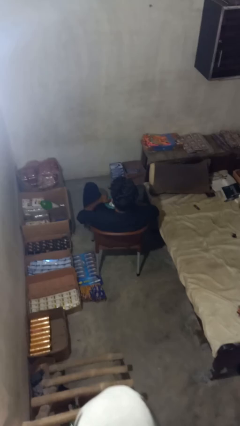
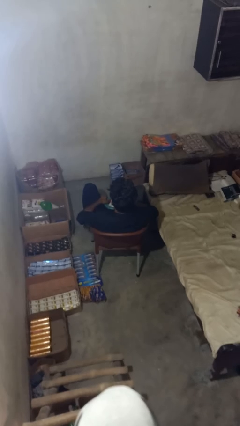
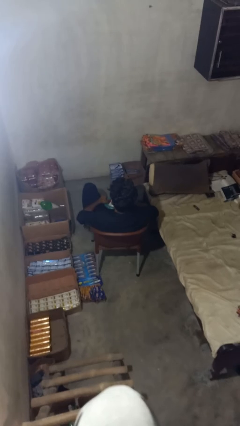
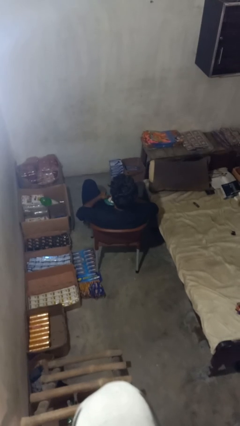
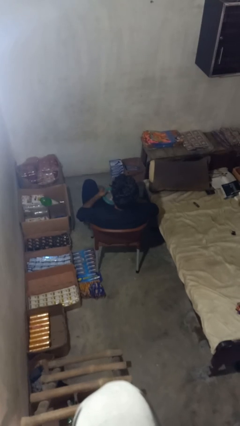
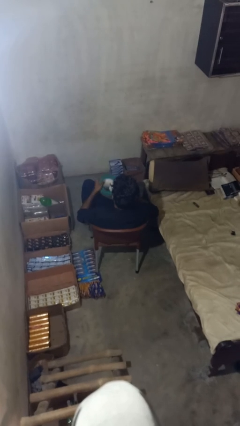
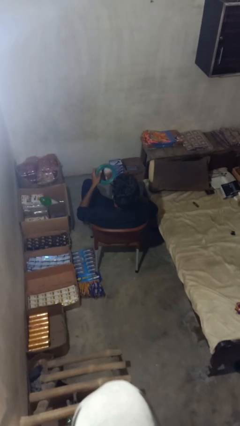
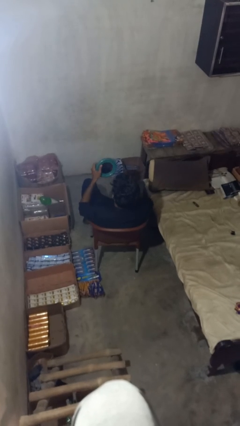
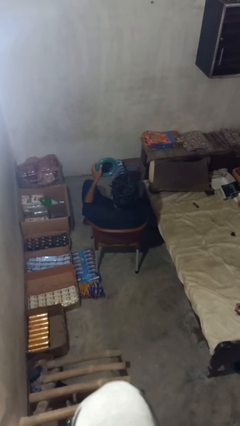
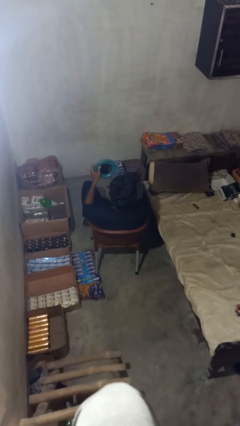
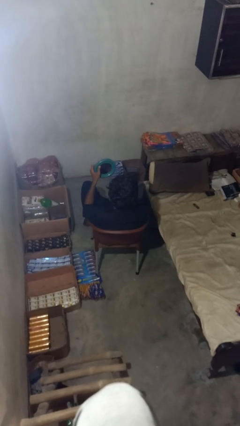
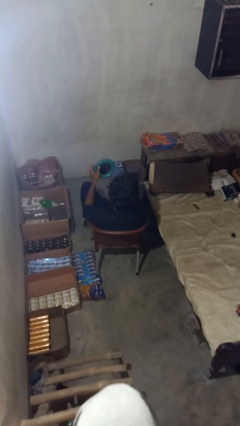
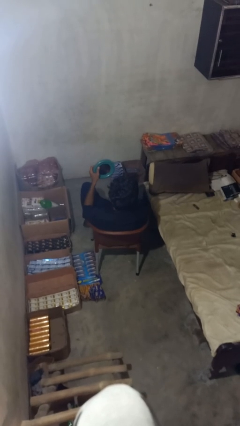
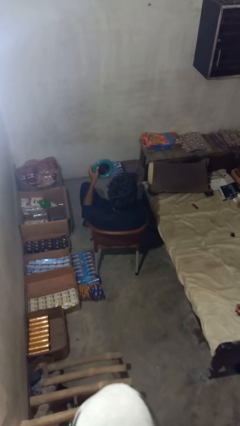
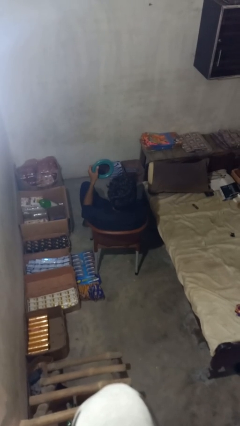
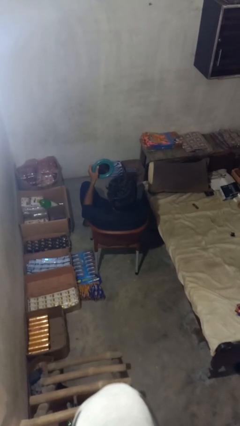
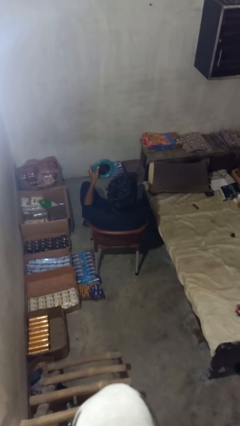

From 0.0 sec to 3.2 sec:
person applies foundation makeup

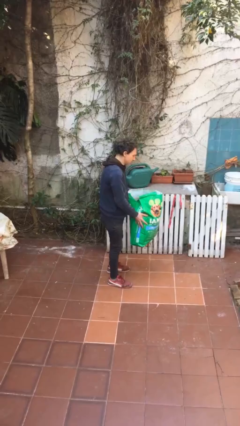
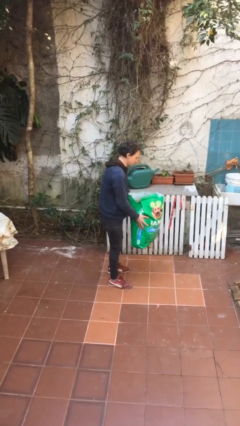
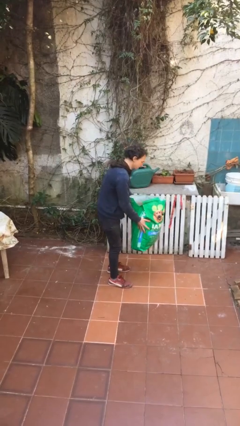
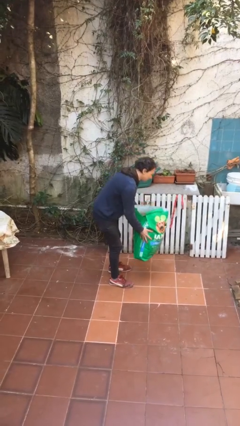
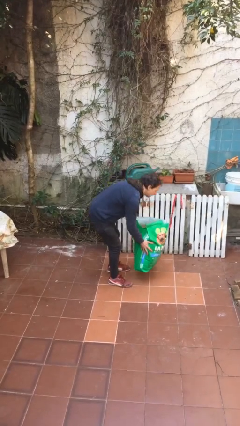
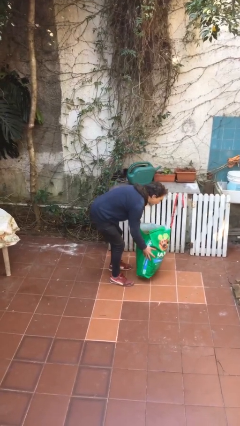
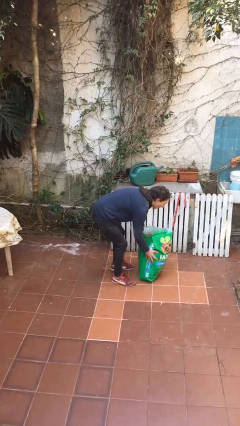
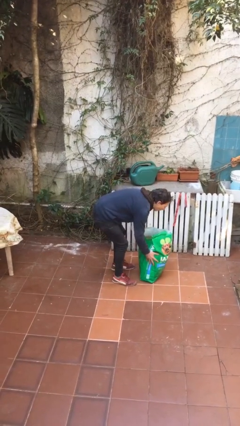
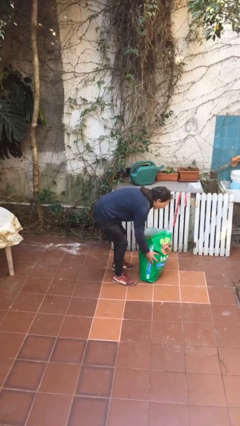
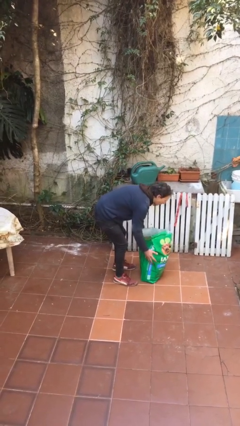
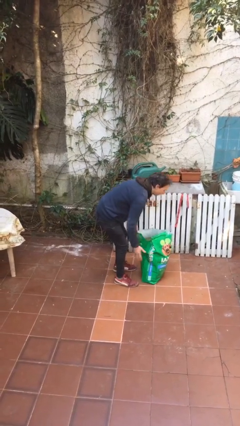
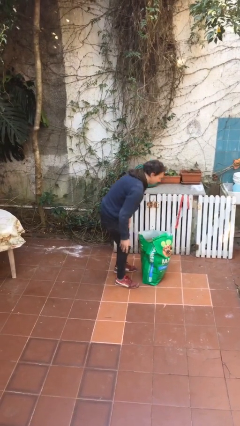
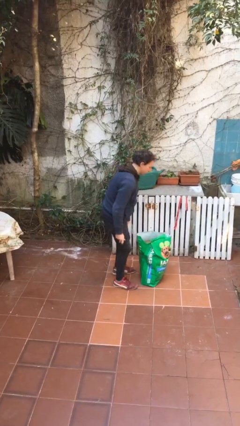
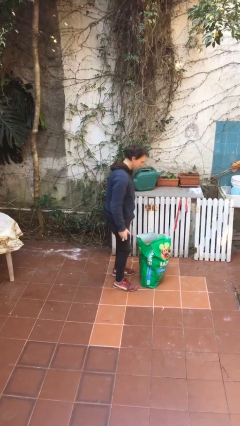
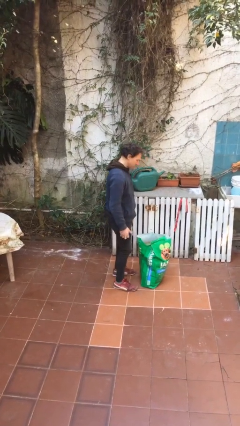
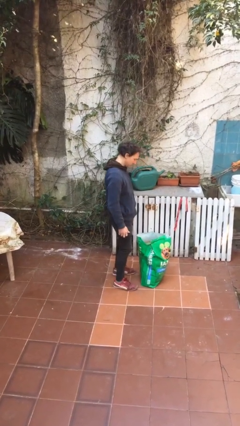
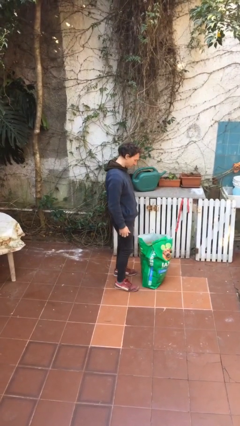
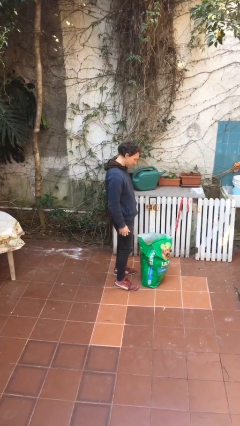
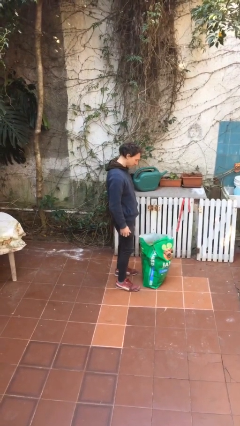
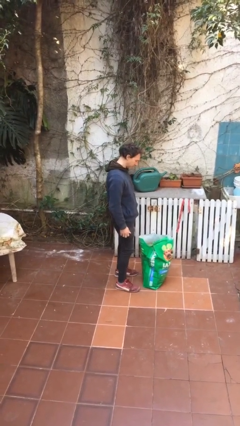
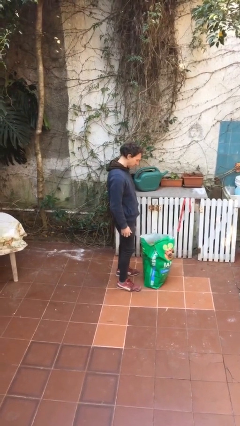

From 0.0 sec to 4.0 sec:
person puts down object on floor

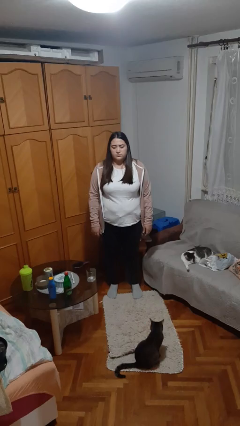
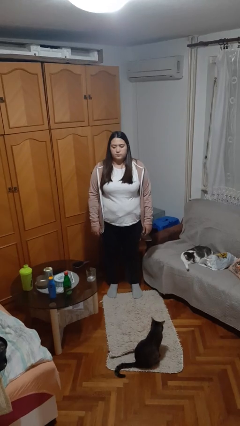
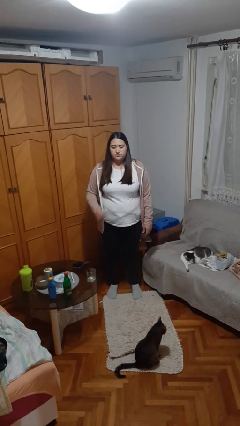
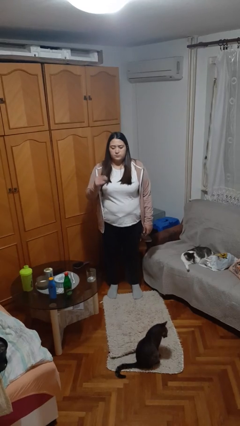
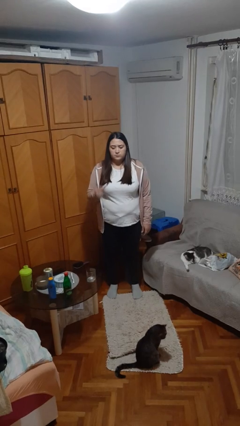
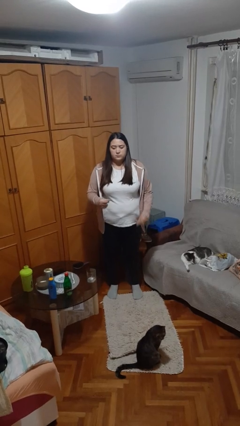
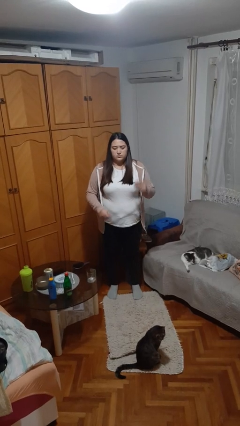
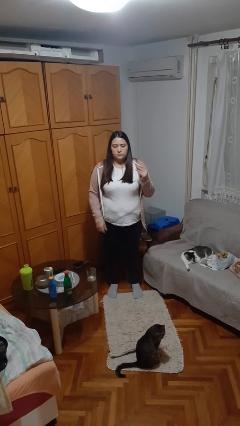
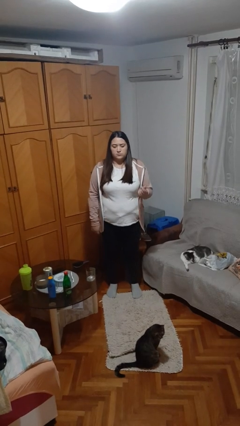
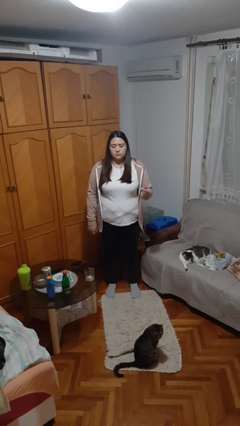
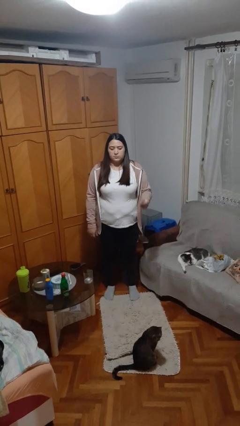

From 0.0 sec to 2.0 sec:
person snaps fingers

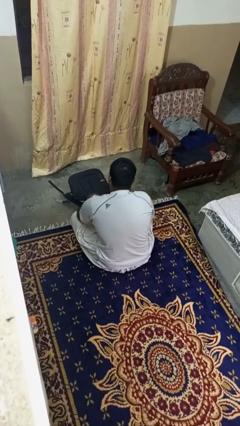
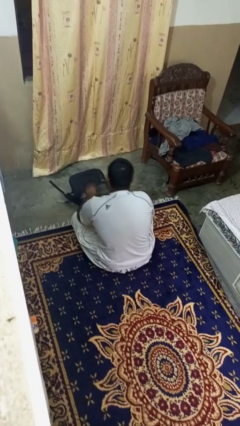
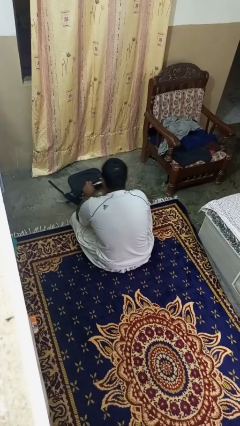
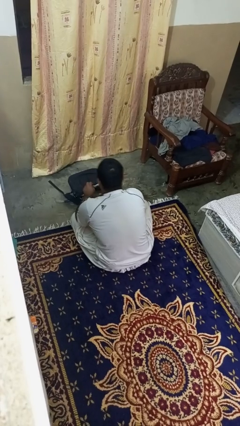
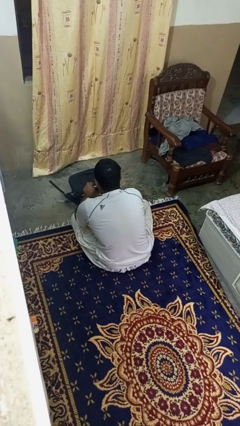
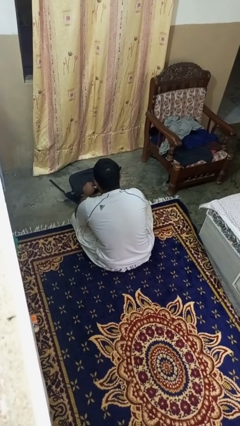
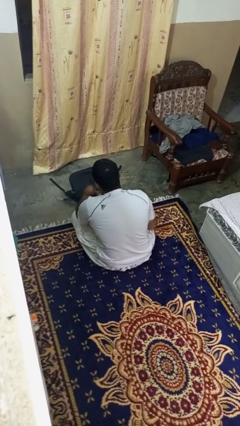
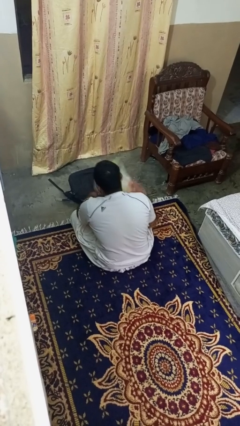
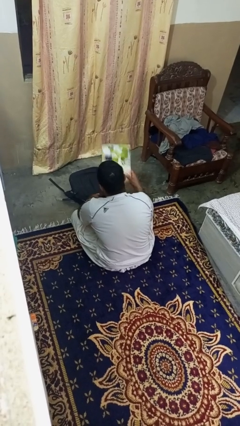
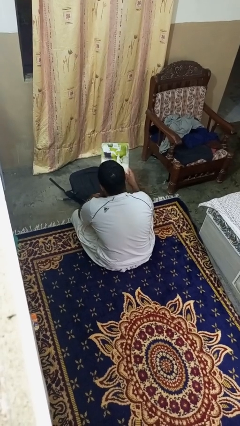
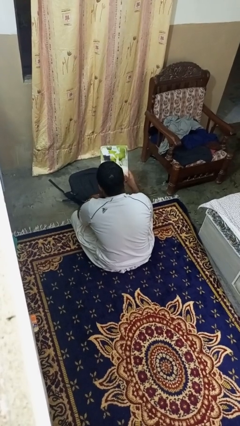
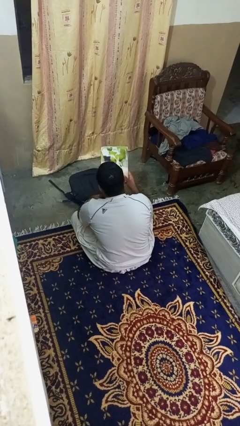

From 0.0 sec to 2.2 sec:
person takes object from bag

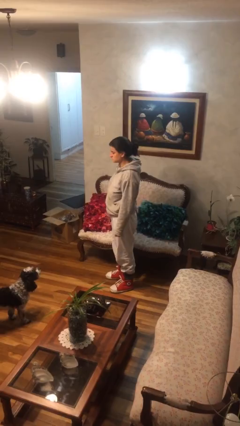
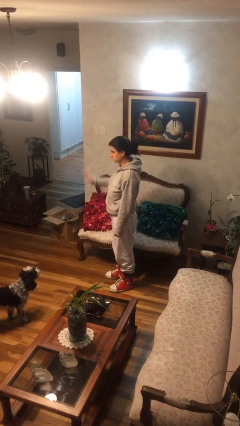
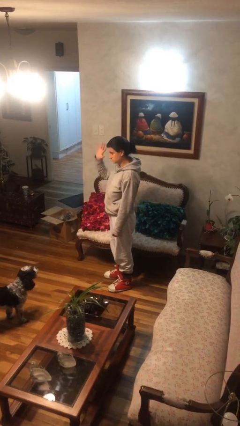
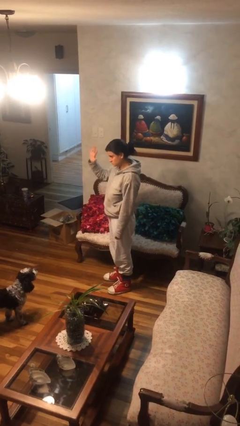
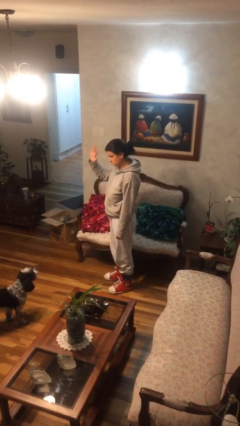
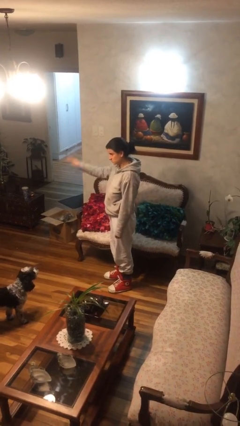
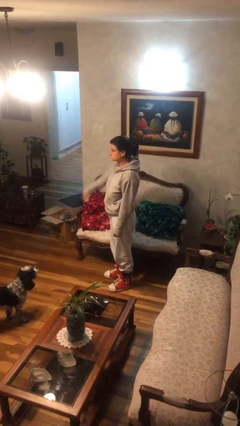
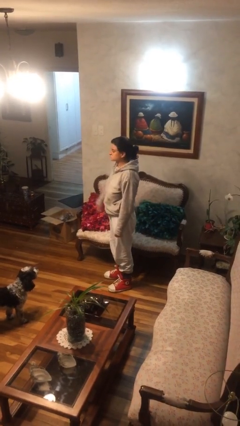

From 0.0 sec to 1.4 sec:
person gestures number five

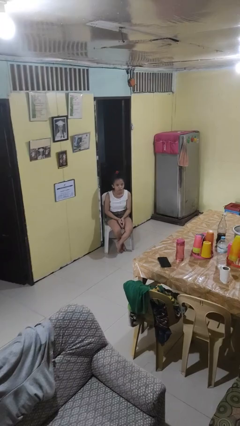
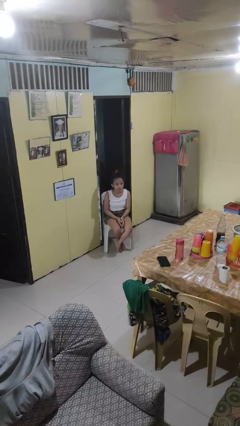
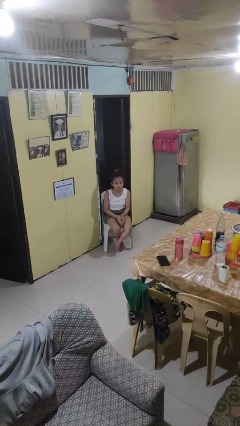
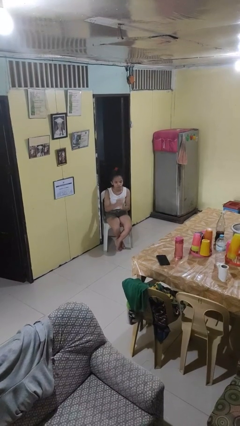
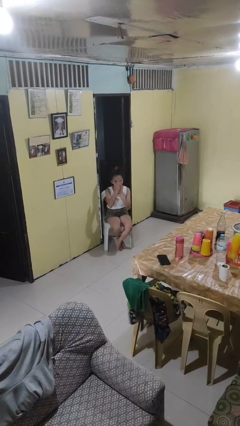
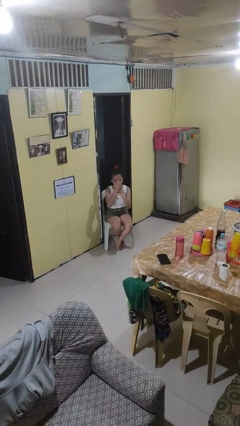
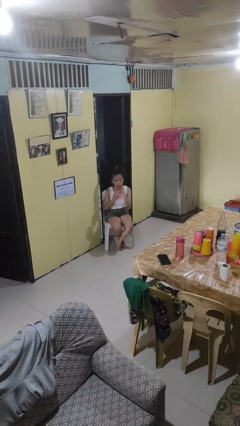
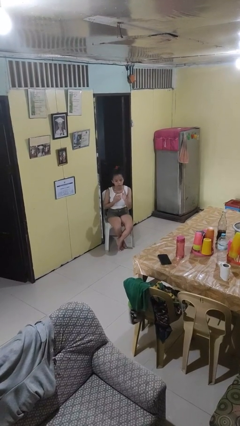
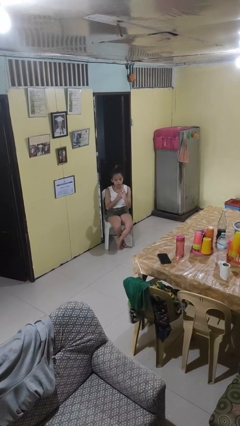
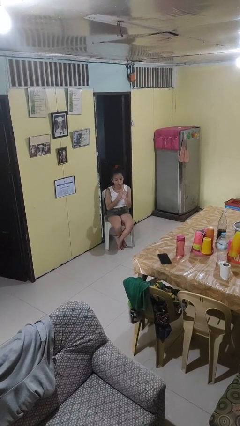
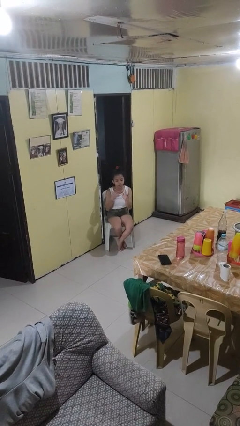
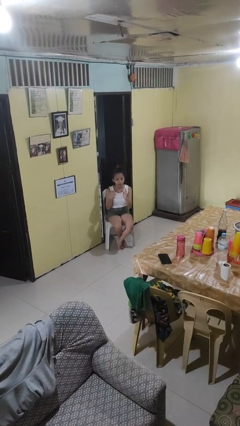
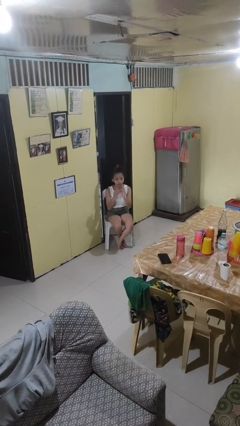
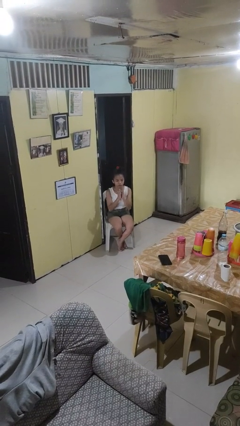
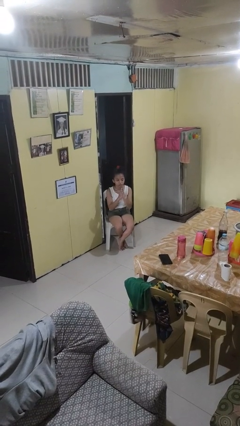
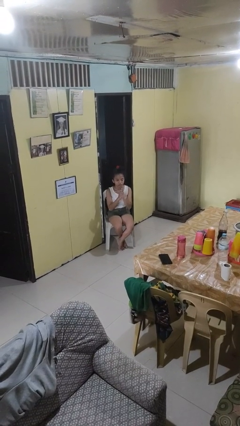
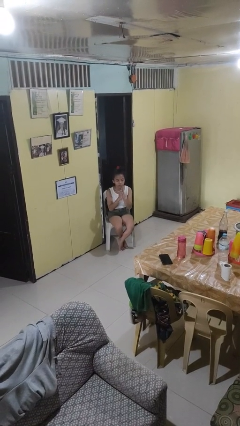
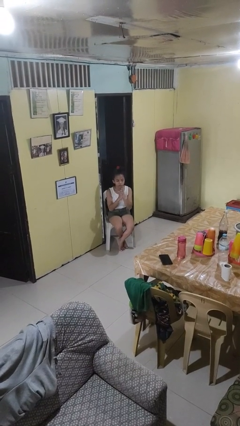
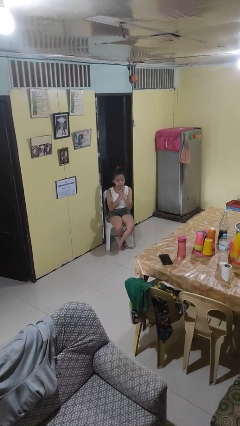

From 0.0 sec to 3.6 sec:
person prays

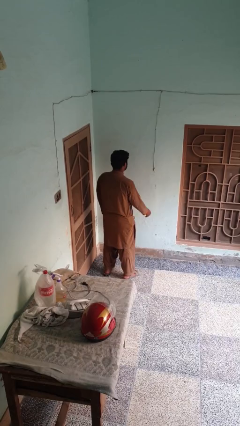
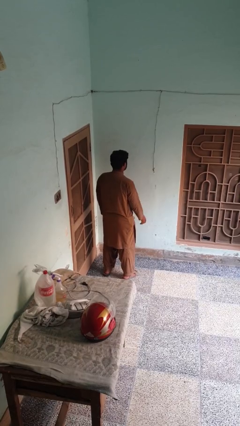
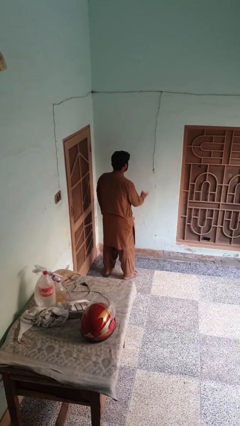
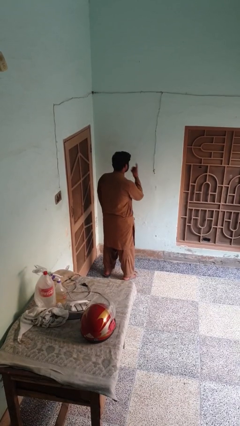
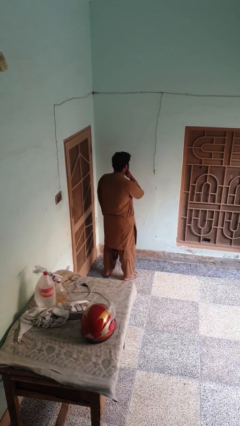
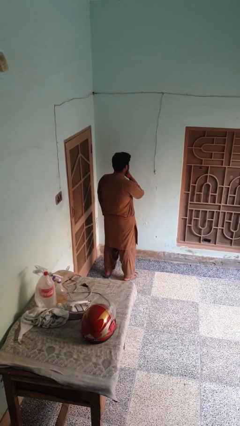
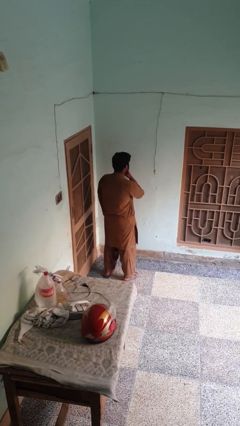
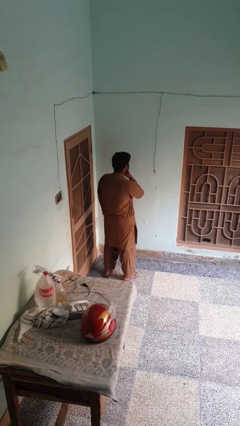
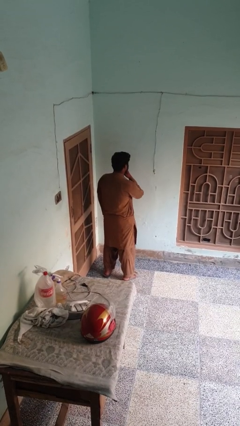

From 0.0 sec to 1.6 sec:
person gestures be quiet
